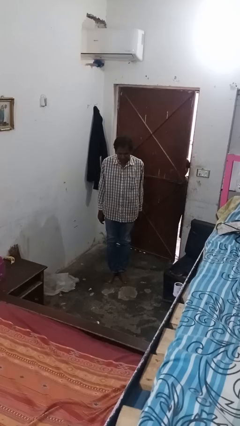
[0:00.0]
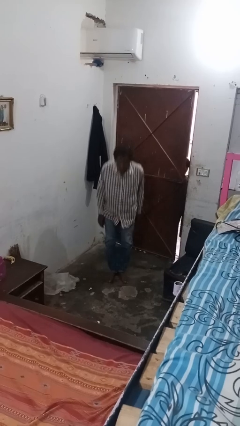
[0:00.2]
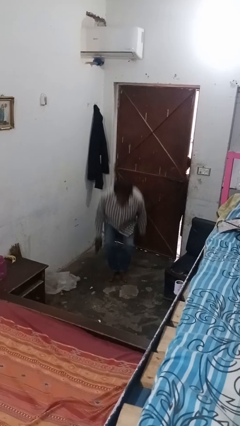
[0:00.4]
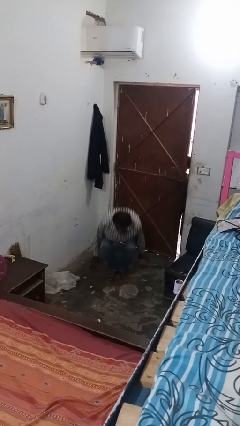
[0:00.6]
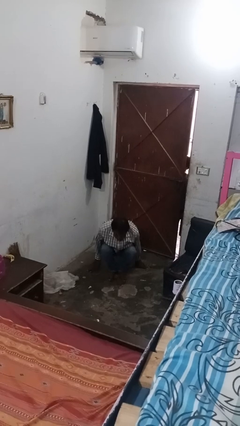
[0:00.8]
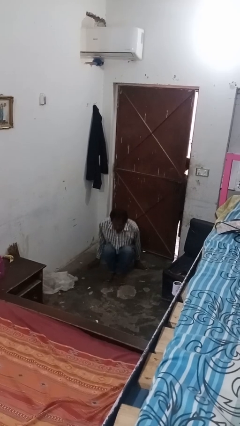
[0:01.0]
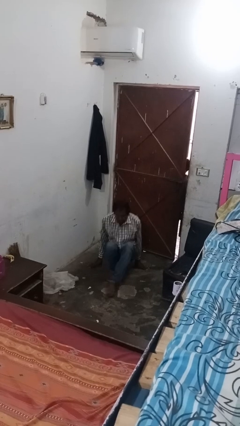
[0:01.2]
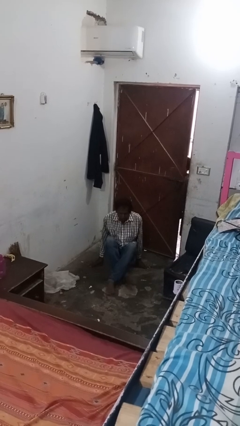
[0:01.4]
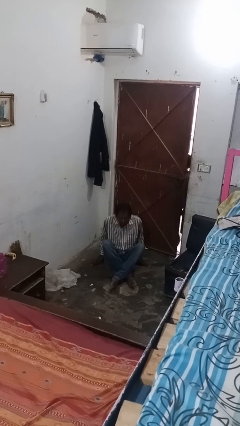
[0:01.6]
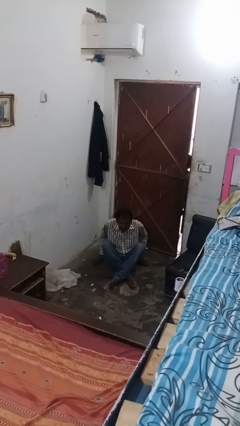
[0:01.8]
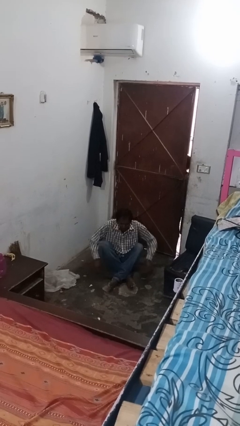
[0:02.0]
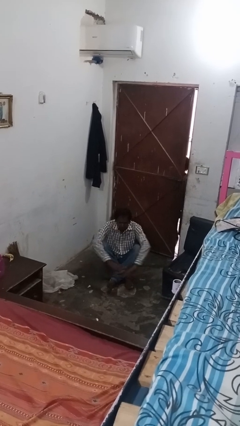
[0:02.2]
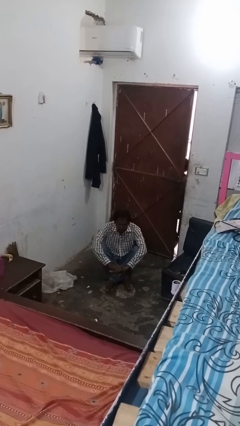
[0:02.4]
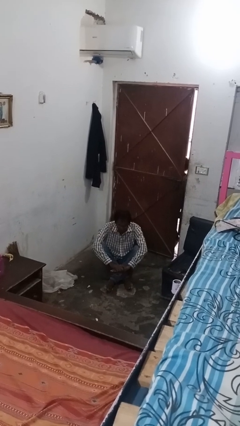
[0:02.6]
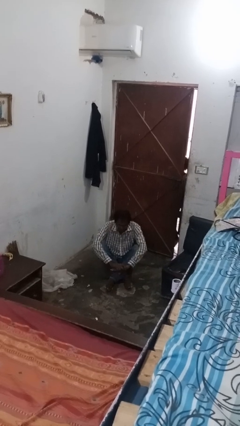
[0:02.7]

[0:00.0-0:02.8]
person sits crisscross

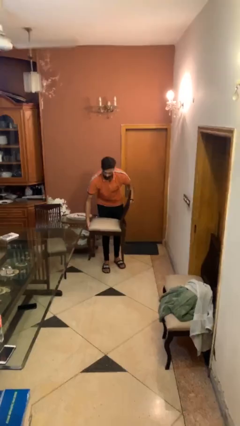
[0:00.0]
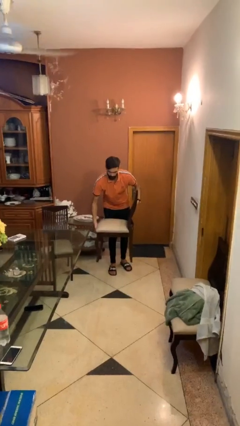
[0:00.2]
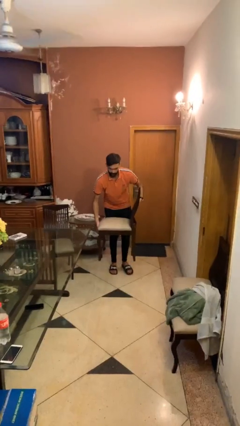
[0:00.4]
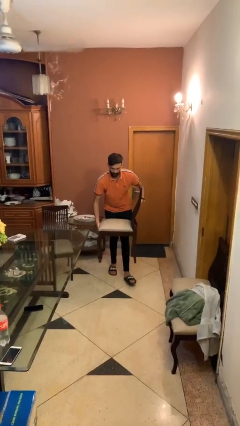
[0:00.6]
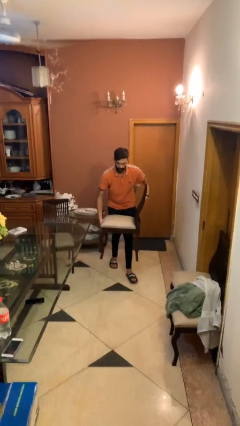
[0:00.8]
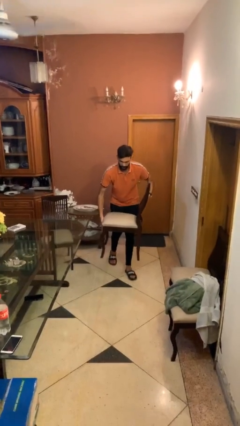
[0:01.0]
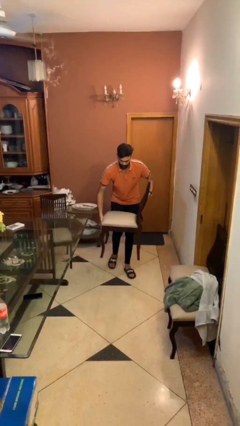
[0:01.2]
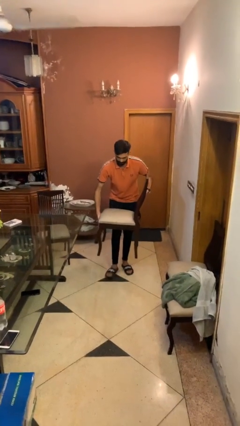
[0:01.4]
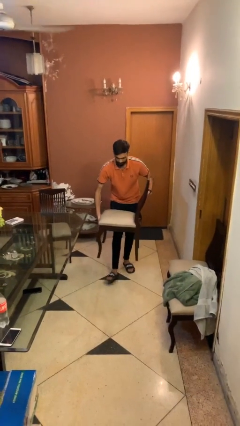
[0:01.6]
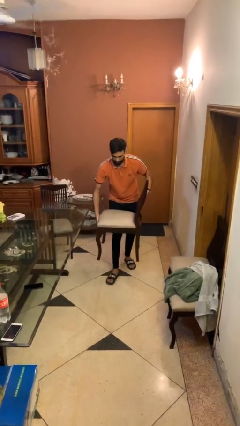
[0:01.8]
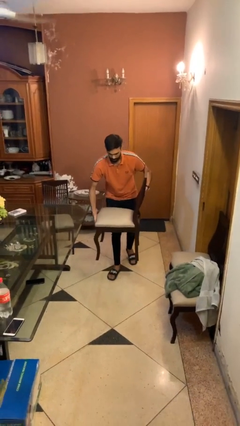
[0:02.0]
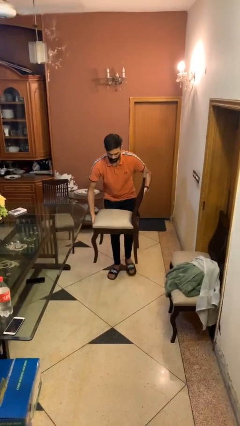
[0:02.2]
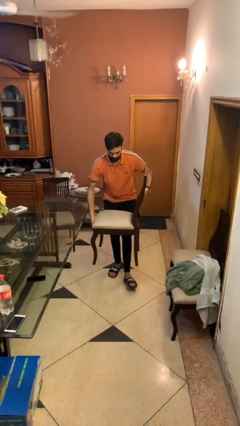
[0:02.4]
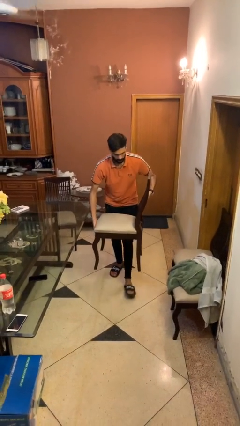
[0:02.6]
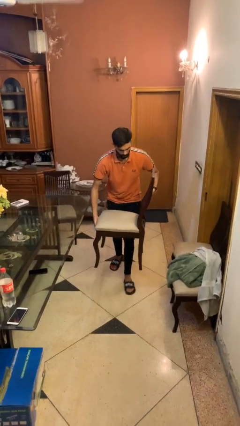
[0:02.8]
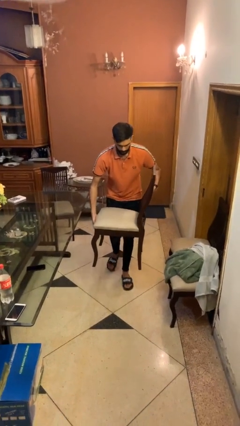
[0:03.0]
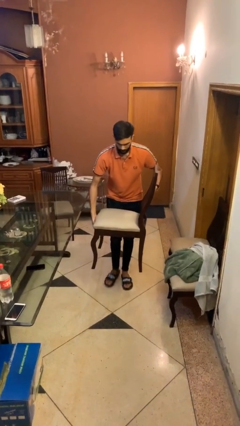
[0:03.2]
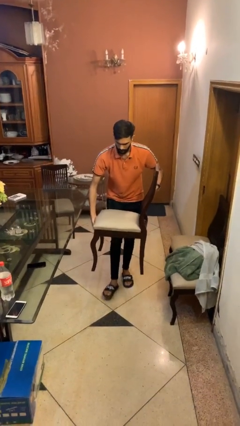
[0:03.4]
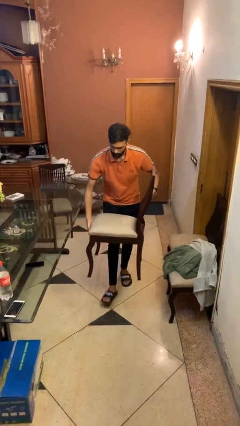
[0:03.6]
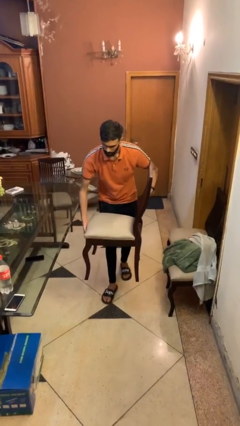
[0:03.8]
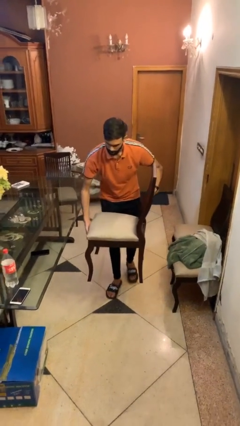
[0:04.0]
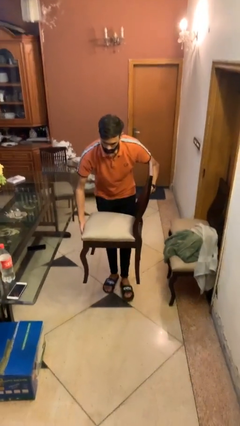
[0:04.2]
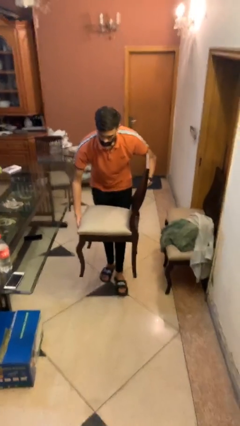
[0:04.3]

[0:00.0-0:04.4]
person carries heavy object

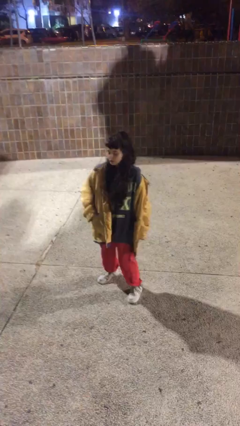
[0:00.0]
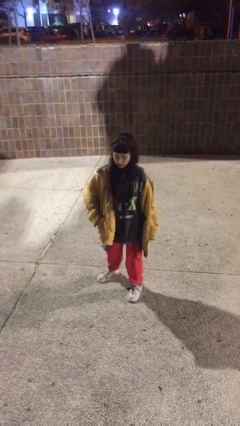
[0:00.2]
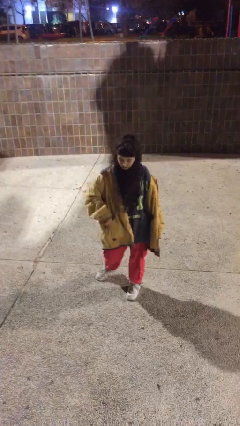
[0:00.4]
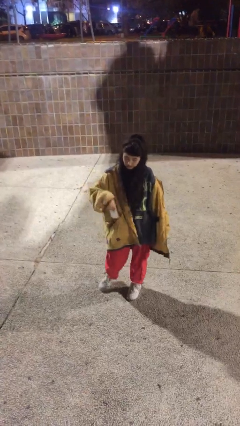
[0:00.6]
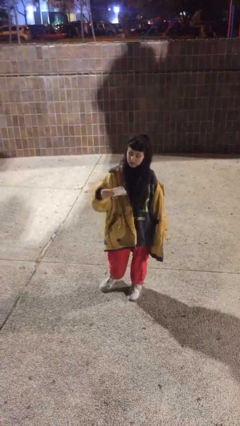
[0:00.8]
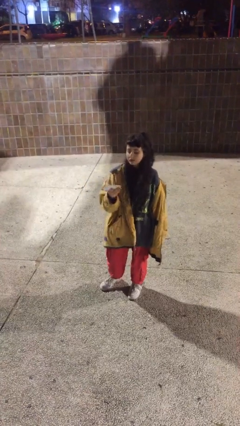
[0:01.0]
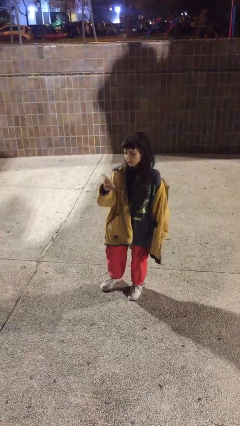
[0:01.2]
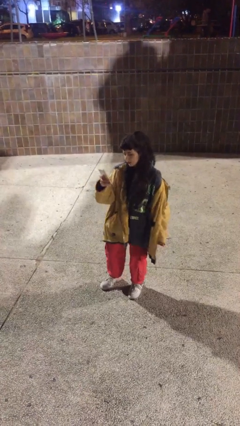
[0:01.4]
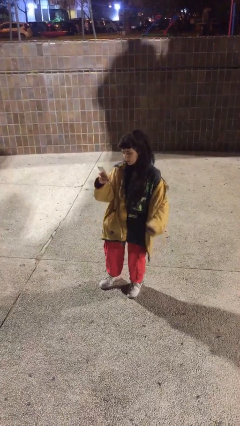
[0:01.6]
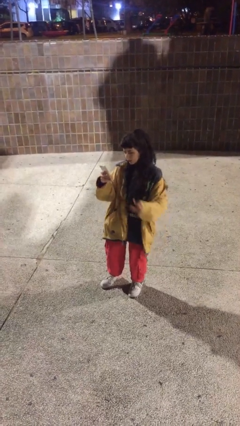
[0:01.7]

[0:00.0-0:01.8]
person takes phone from pocket

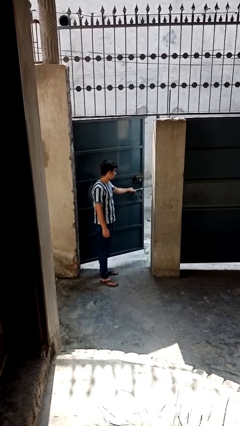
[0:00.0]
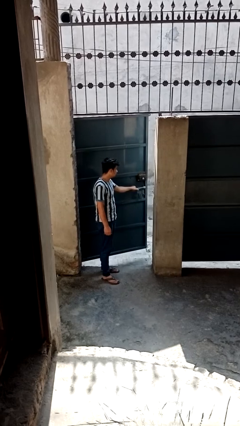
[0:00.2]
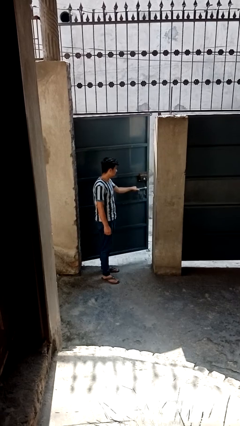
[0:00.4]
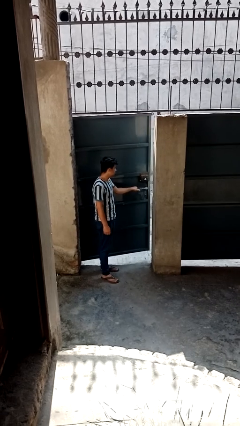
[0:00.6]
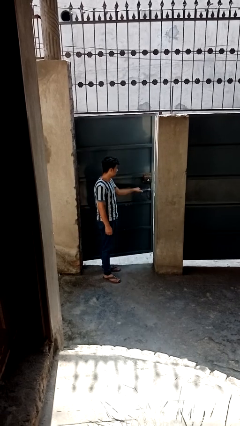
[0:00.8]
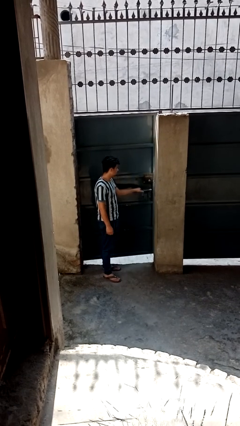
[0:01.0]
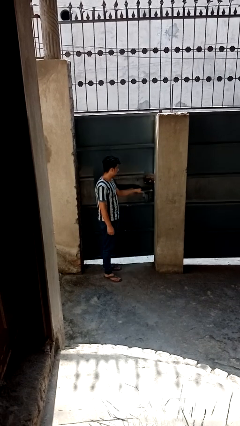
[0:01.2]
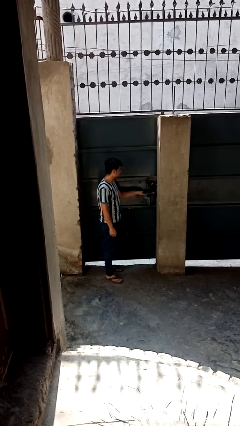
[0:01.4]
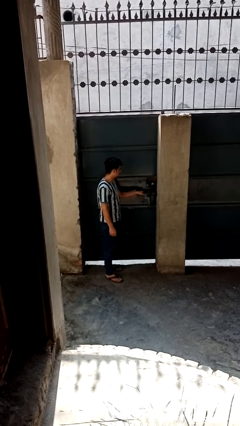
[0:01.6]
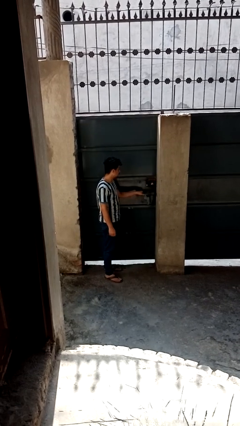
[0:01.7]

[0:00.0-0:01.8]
person closes gate

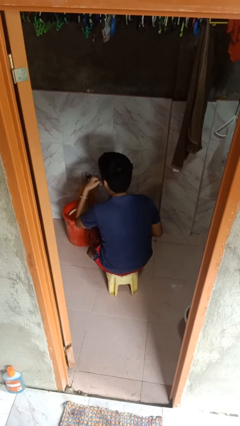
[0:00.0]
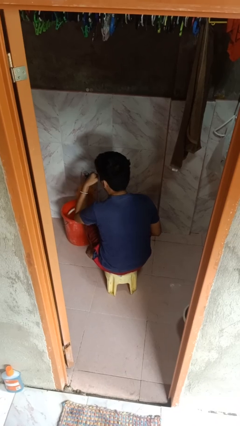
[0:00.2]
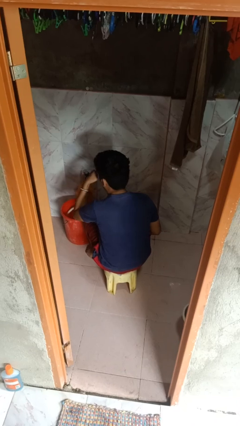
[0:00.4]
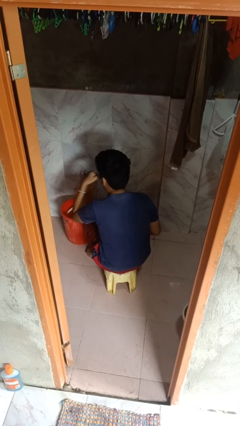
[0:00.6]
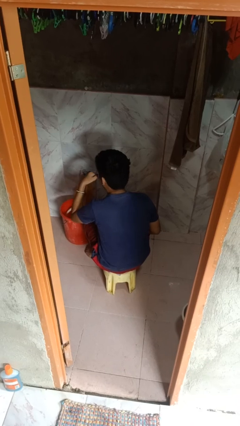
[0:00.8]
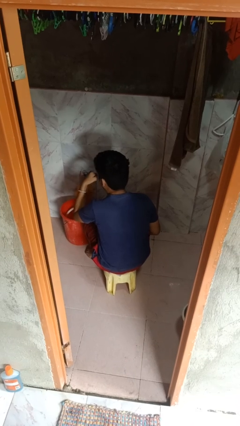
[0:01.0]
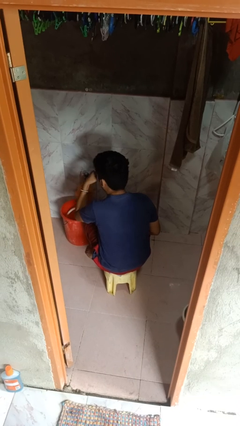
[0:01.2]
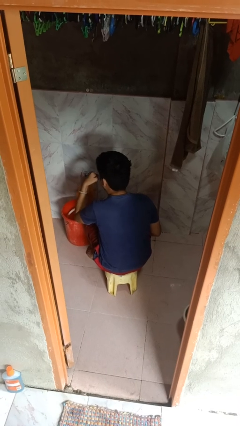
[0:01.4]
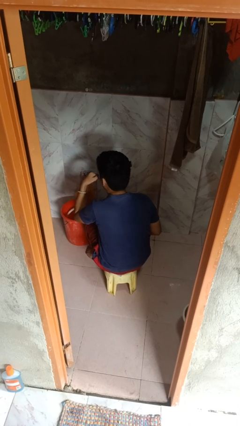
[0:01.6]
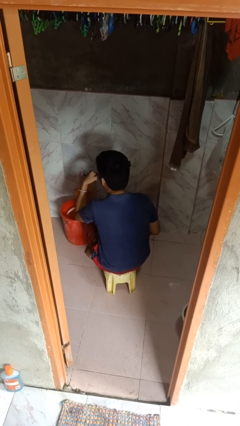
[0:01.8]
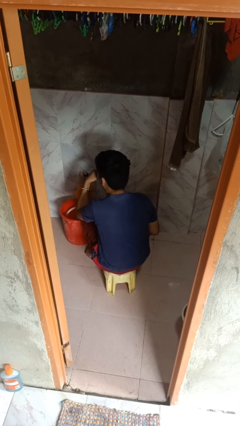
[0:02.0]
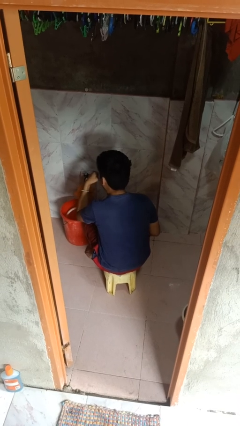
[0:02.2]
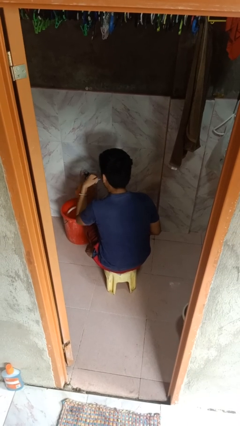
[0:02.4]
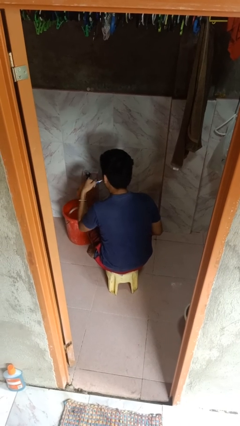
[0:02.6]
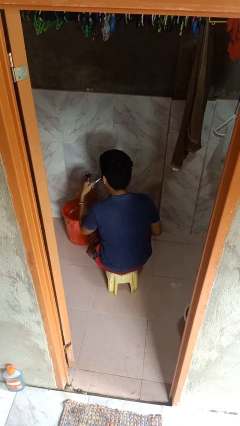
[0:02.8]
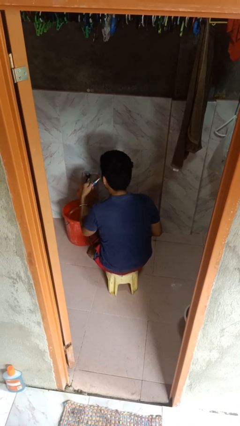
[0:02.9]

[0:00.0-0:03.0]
person brushes teeth

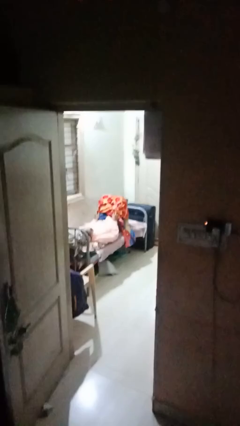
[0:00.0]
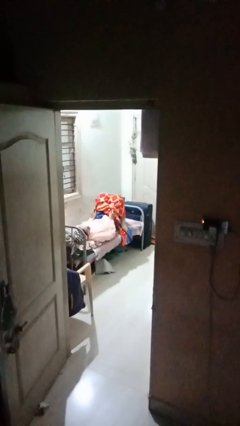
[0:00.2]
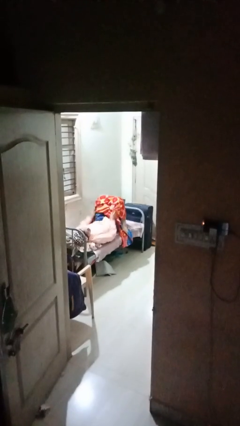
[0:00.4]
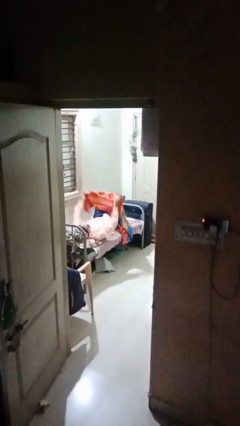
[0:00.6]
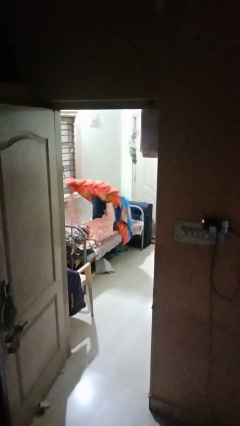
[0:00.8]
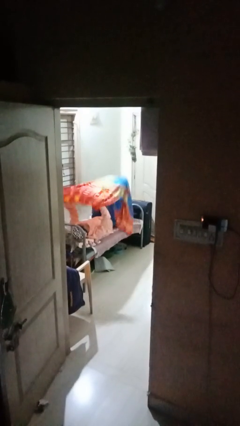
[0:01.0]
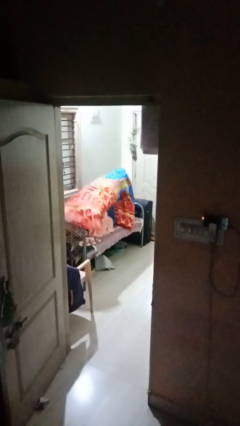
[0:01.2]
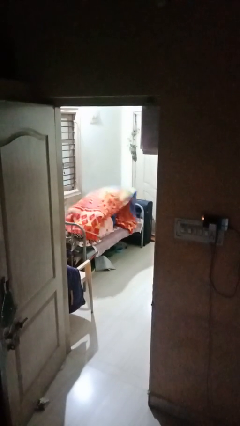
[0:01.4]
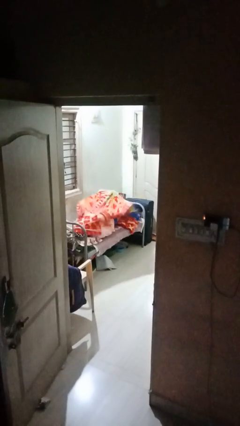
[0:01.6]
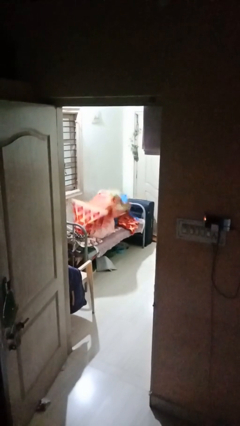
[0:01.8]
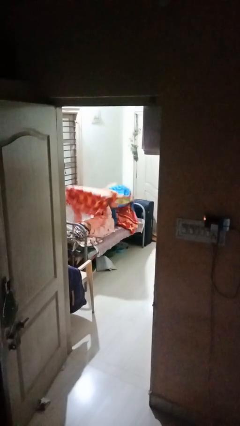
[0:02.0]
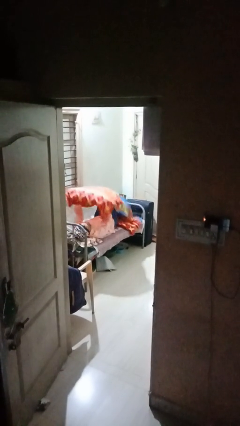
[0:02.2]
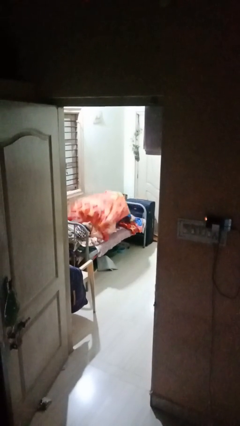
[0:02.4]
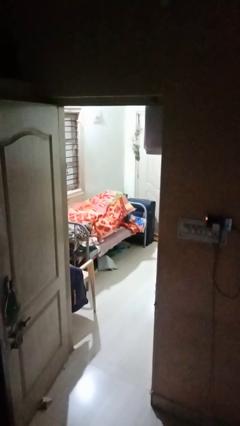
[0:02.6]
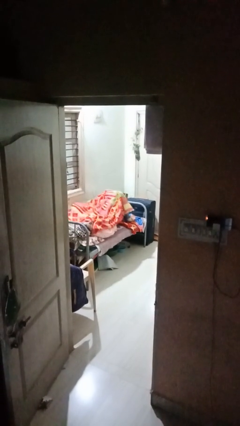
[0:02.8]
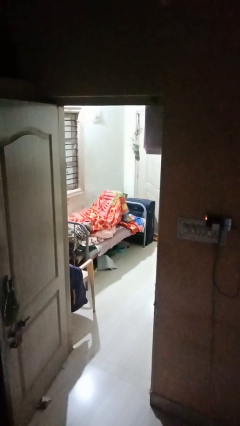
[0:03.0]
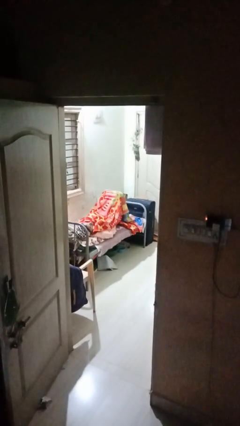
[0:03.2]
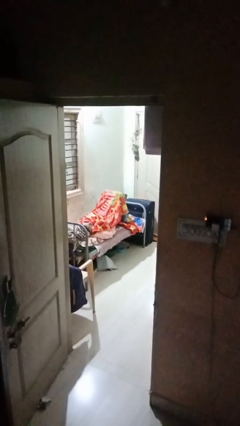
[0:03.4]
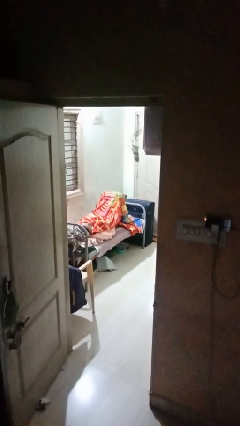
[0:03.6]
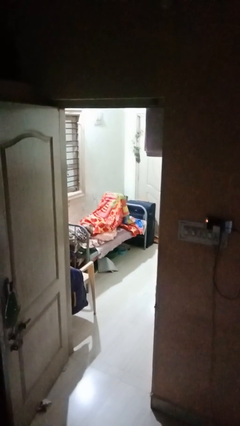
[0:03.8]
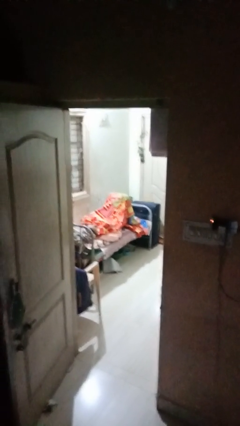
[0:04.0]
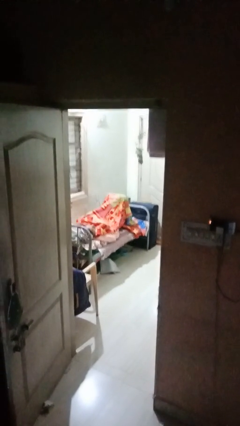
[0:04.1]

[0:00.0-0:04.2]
person covers with bedsheets
